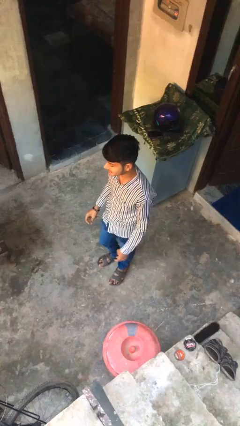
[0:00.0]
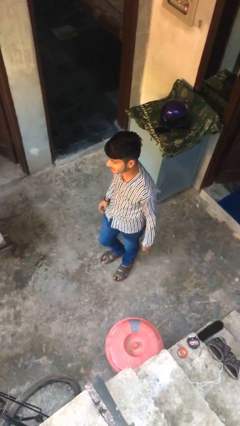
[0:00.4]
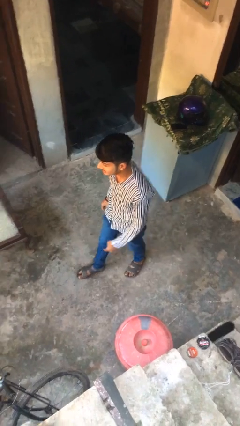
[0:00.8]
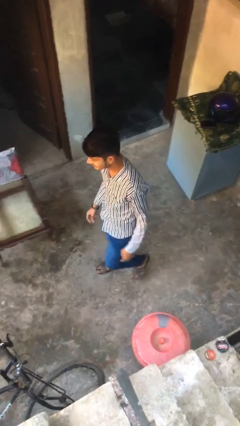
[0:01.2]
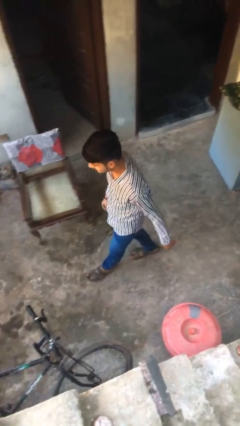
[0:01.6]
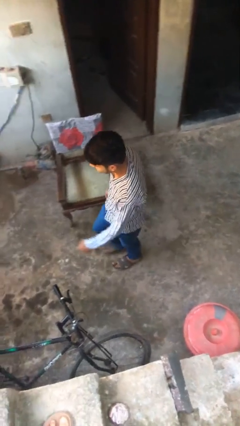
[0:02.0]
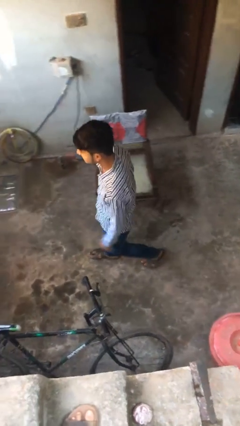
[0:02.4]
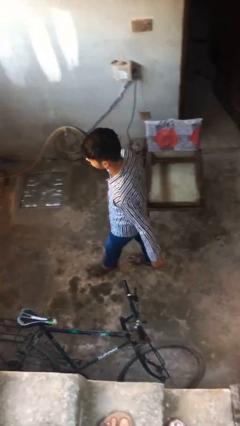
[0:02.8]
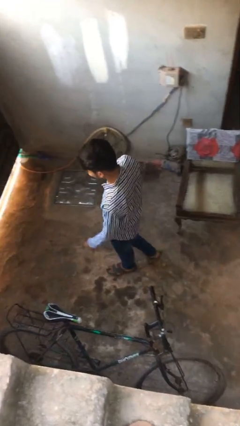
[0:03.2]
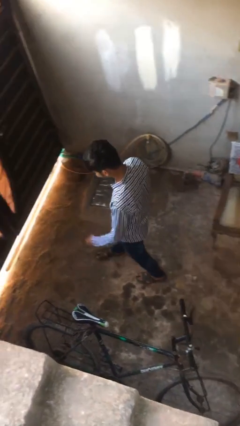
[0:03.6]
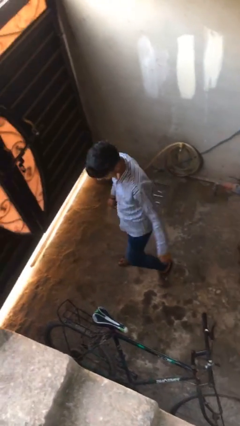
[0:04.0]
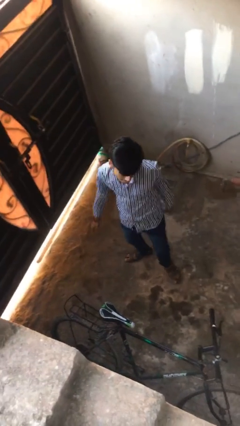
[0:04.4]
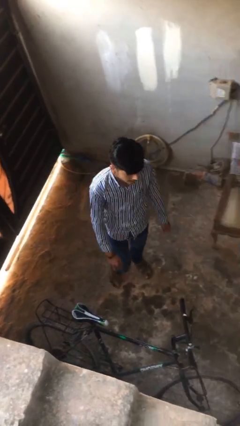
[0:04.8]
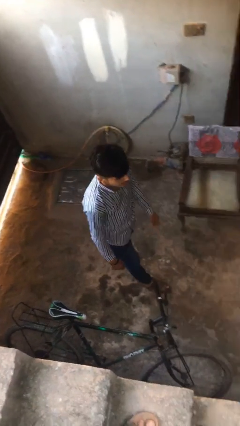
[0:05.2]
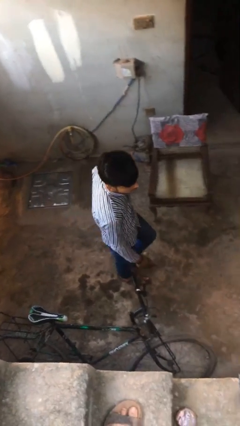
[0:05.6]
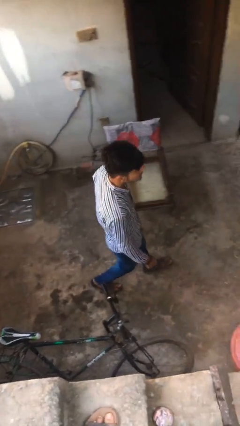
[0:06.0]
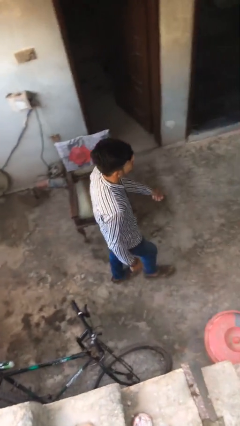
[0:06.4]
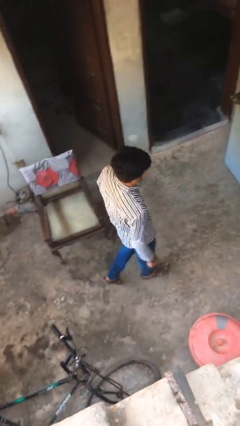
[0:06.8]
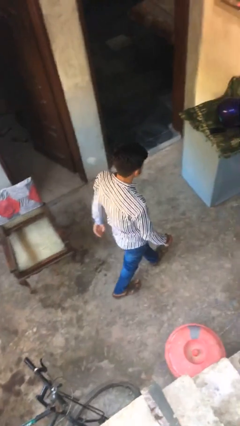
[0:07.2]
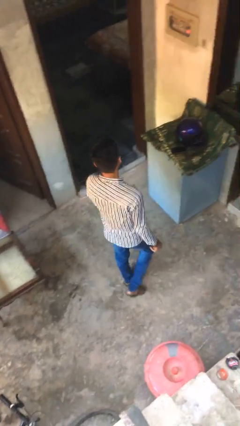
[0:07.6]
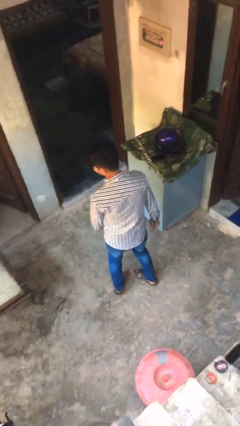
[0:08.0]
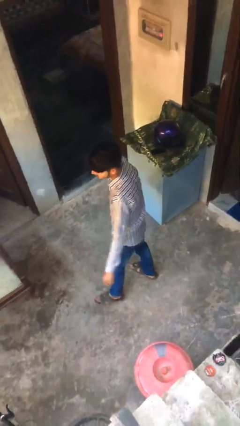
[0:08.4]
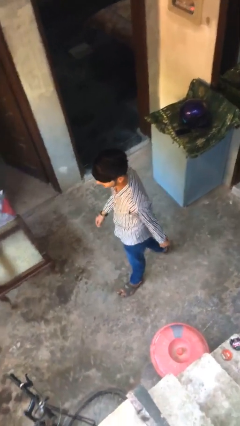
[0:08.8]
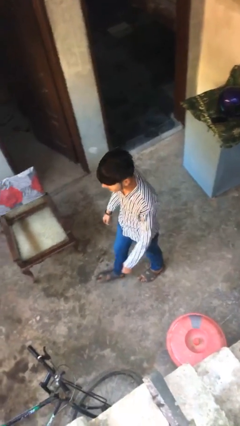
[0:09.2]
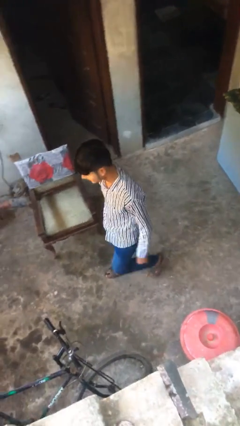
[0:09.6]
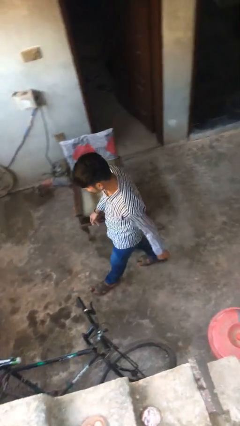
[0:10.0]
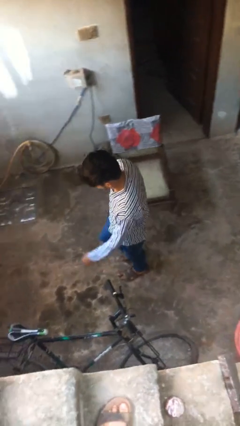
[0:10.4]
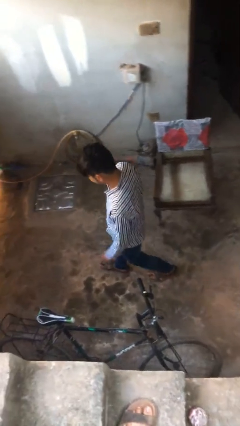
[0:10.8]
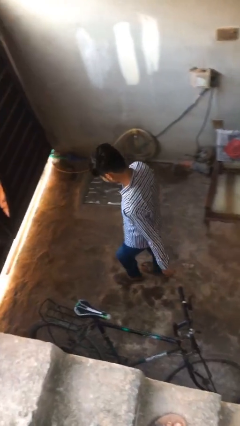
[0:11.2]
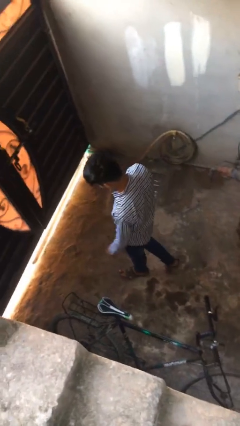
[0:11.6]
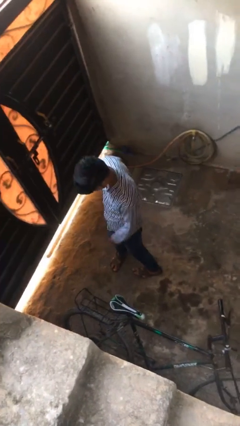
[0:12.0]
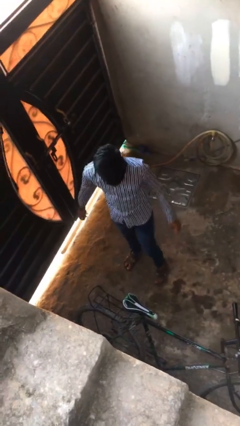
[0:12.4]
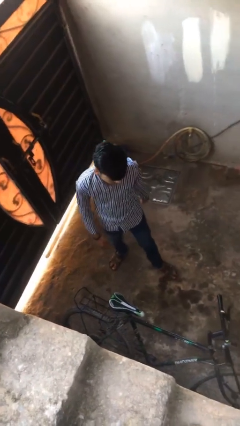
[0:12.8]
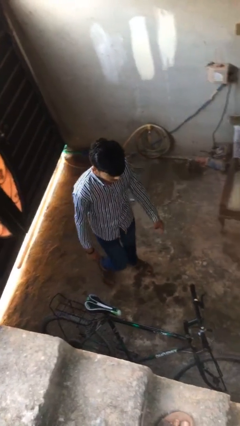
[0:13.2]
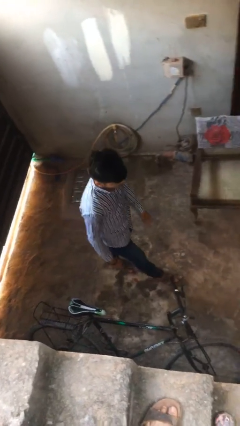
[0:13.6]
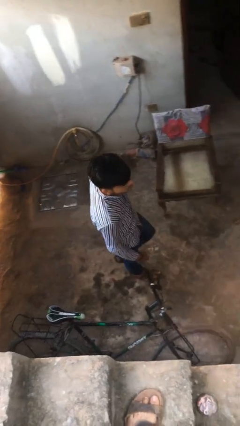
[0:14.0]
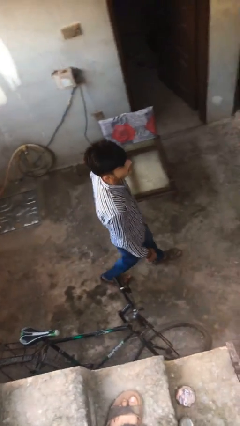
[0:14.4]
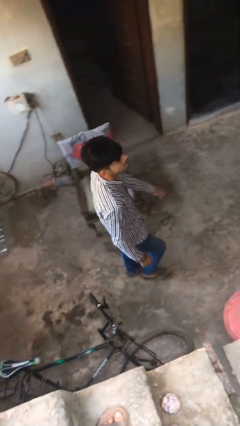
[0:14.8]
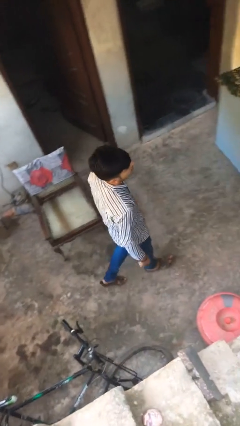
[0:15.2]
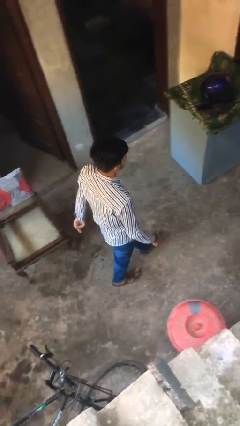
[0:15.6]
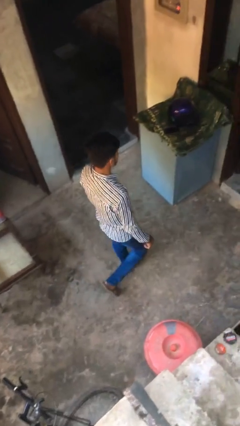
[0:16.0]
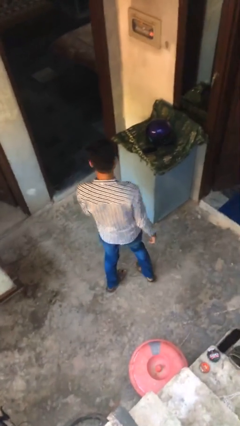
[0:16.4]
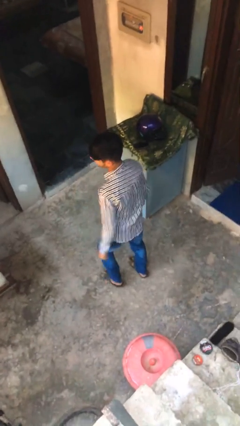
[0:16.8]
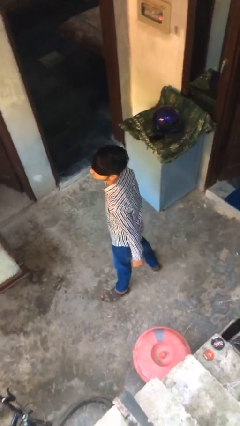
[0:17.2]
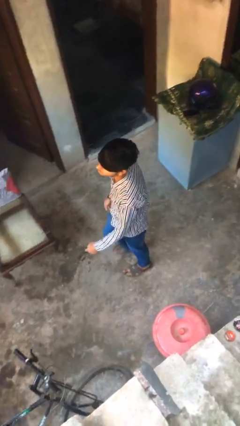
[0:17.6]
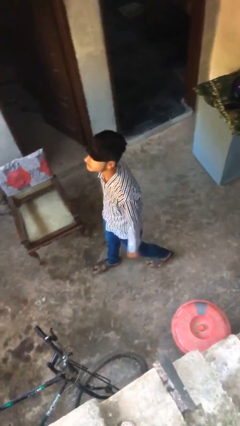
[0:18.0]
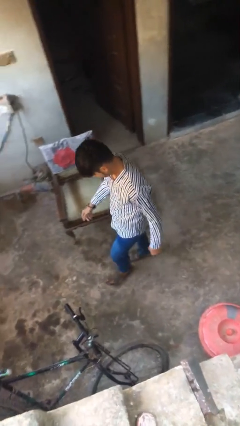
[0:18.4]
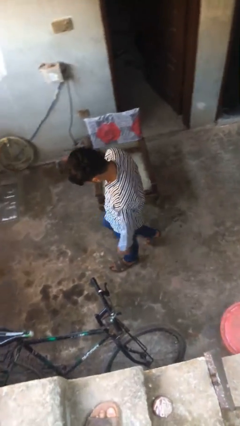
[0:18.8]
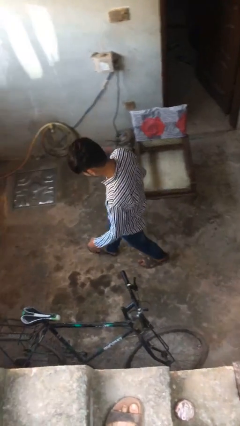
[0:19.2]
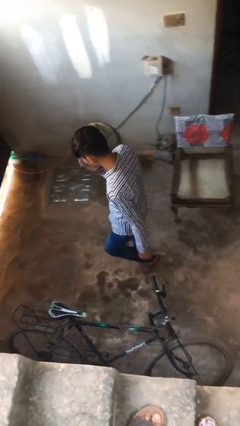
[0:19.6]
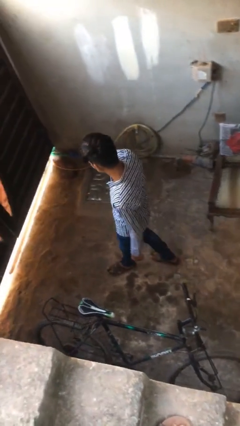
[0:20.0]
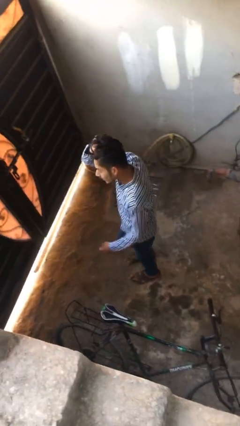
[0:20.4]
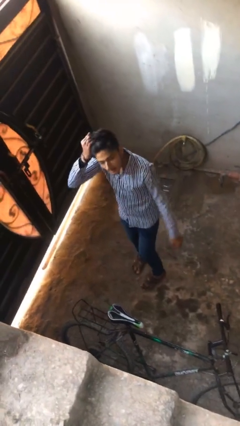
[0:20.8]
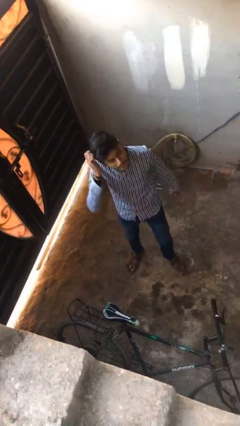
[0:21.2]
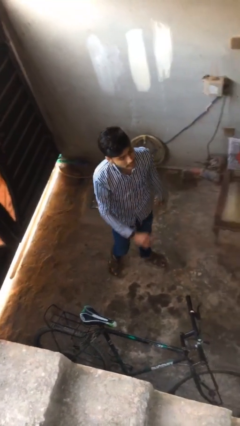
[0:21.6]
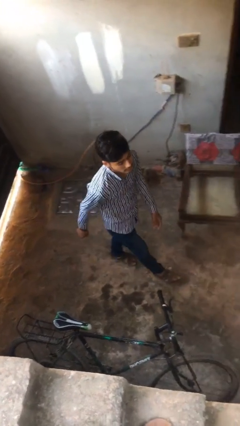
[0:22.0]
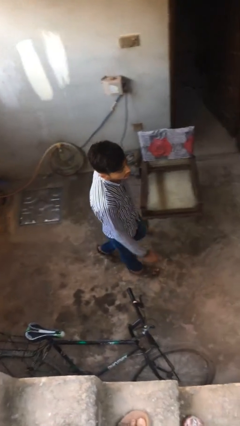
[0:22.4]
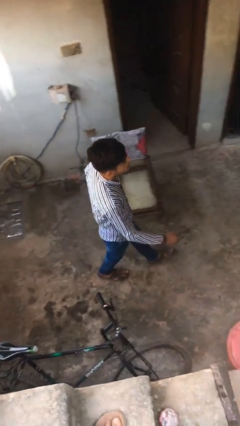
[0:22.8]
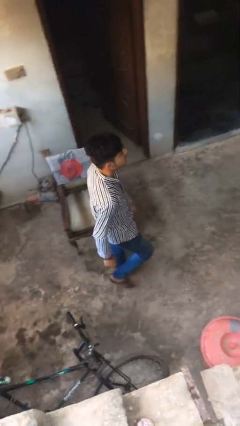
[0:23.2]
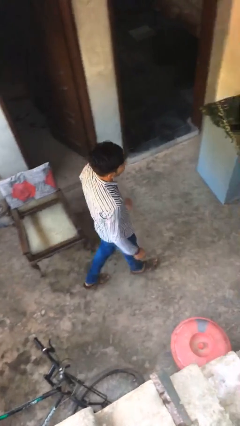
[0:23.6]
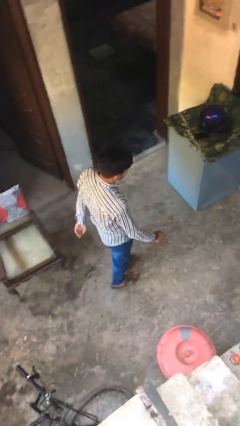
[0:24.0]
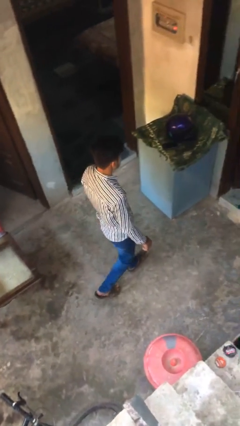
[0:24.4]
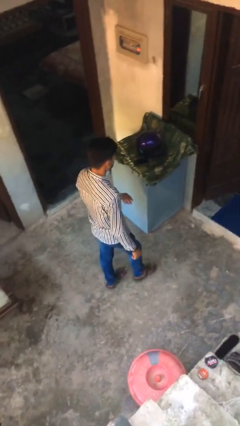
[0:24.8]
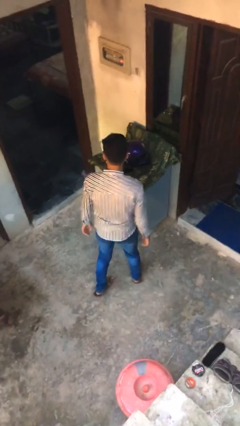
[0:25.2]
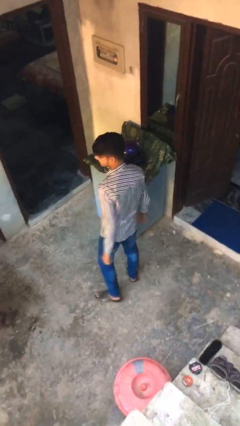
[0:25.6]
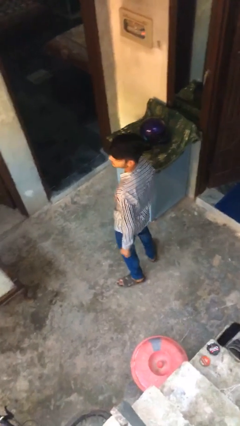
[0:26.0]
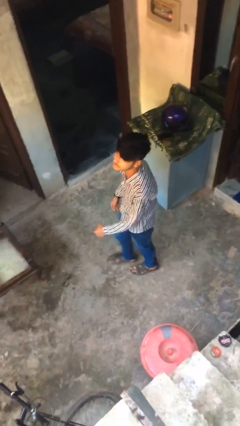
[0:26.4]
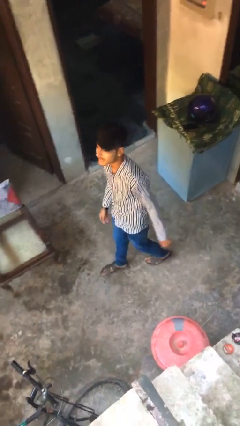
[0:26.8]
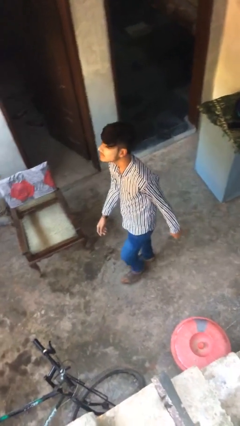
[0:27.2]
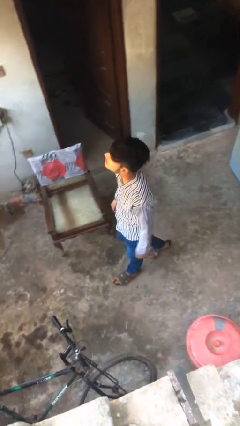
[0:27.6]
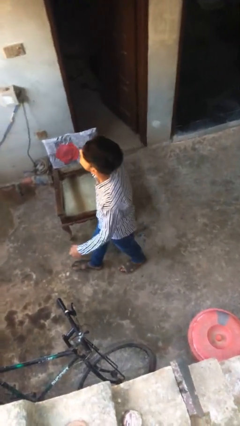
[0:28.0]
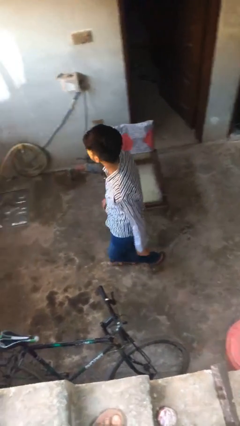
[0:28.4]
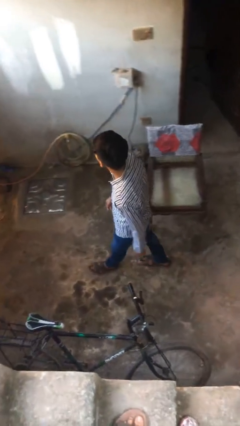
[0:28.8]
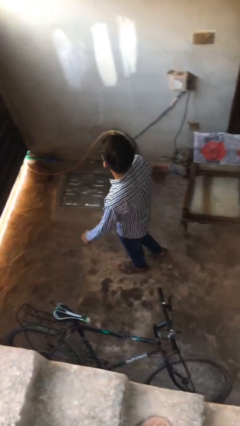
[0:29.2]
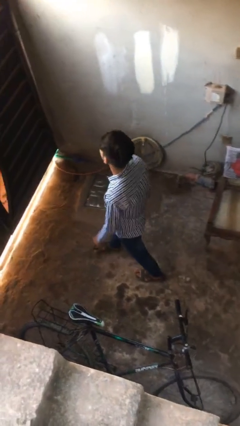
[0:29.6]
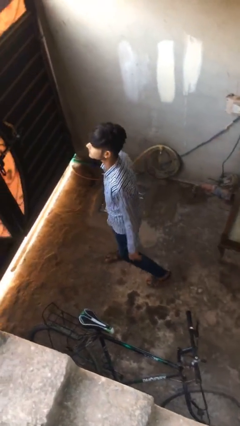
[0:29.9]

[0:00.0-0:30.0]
person walks

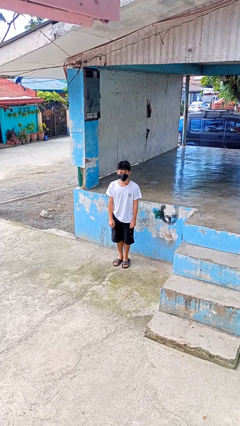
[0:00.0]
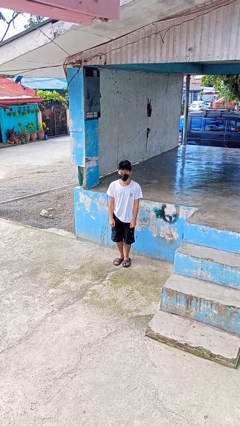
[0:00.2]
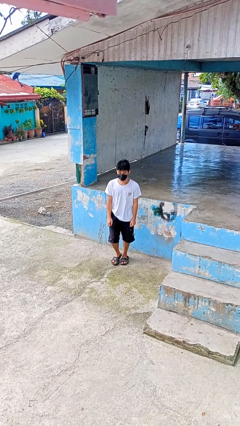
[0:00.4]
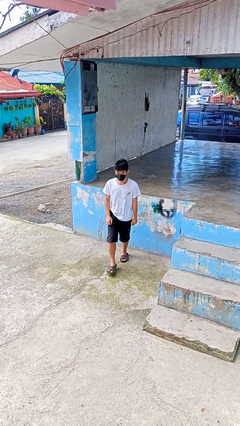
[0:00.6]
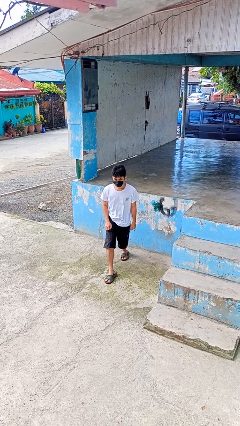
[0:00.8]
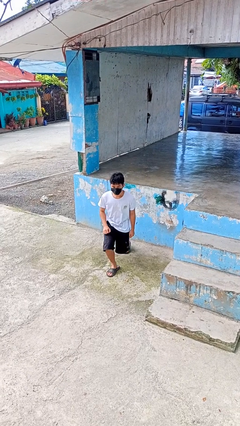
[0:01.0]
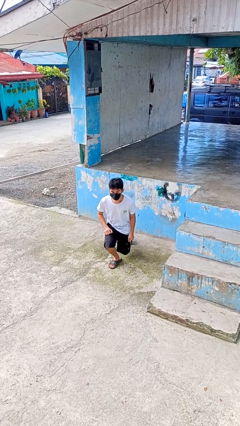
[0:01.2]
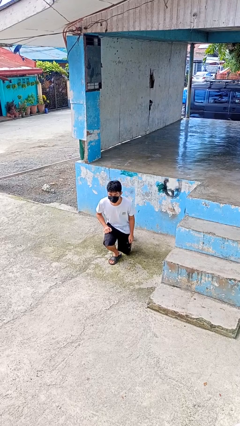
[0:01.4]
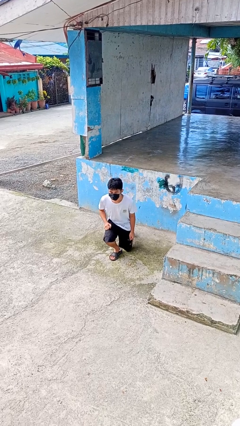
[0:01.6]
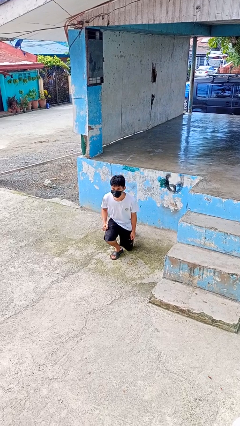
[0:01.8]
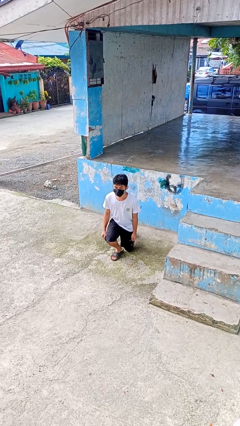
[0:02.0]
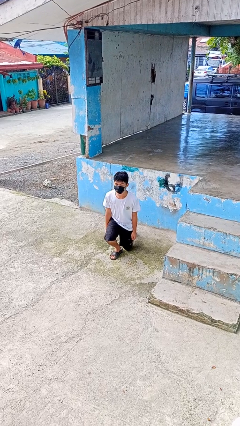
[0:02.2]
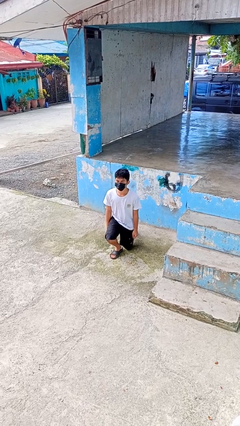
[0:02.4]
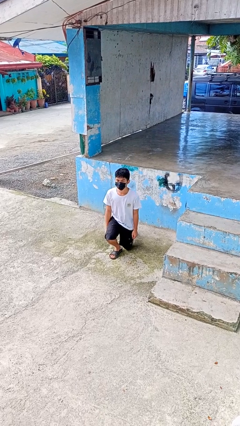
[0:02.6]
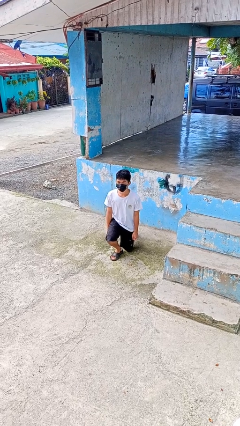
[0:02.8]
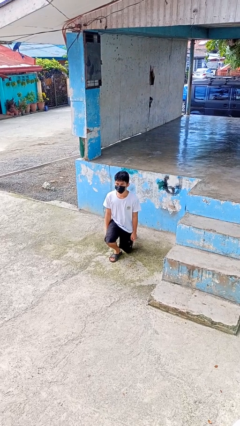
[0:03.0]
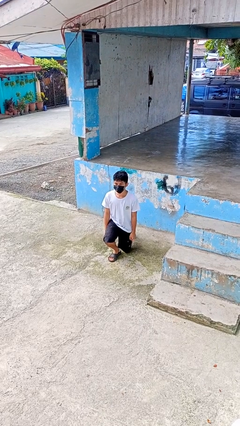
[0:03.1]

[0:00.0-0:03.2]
person kneels

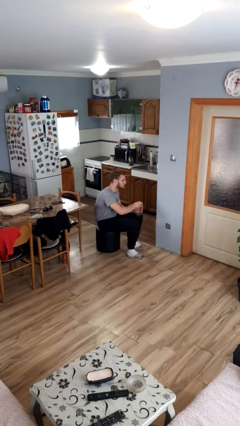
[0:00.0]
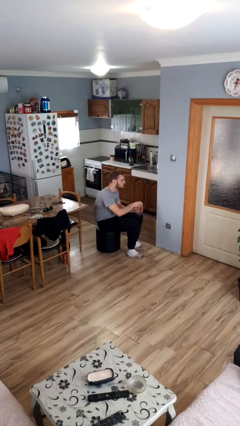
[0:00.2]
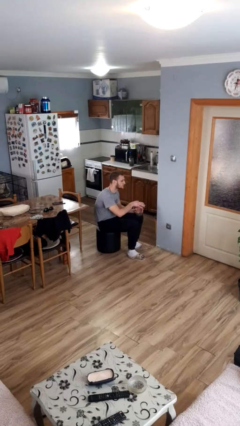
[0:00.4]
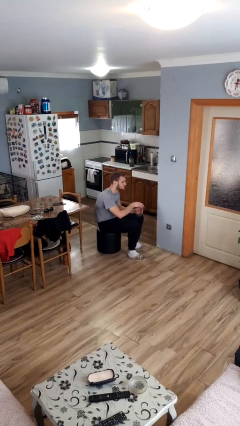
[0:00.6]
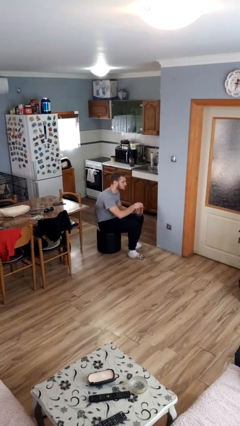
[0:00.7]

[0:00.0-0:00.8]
person closes jar
